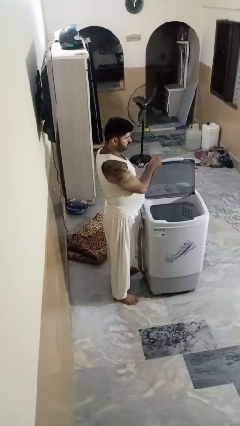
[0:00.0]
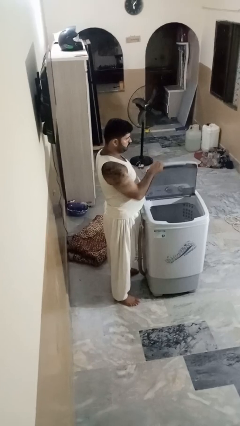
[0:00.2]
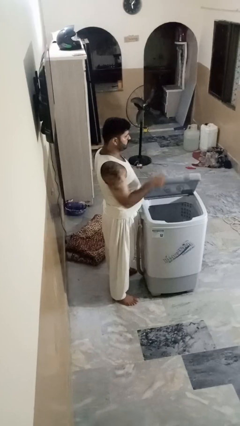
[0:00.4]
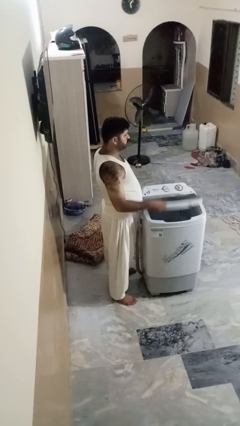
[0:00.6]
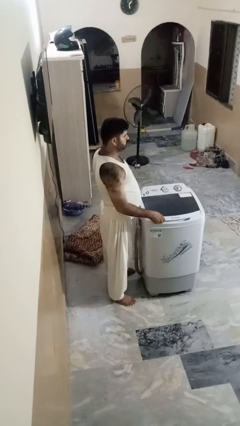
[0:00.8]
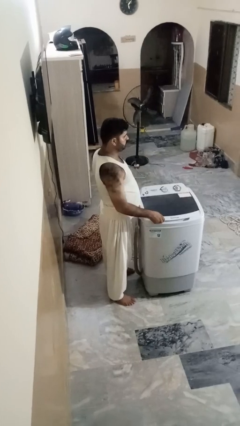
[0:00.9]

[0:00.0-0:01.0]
person closes clothes washer

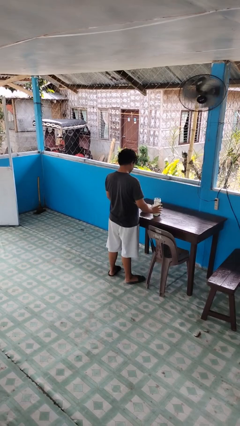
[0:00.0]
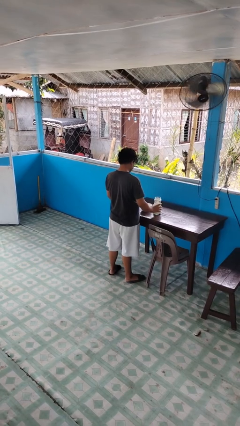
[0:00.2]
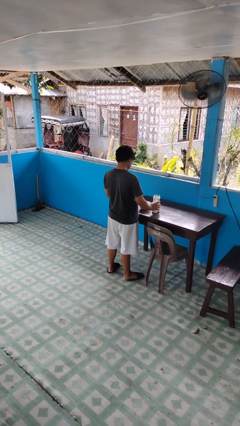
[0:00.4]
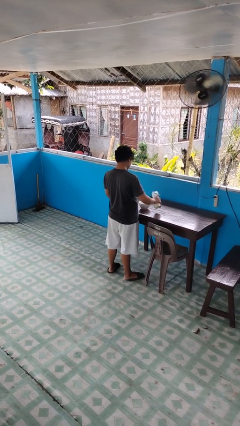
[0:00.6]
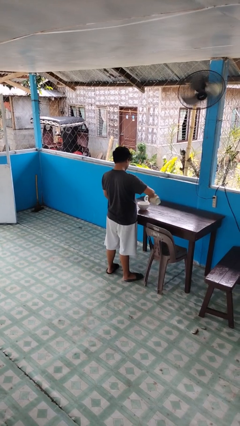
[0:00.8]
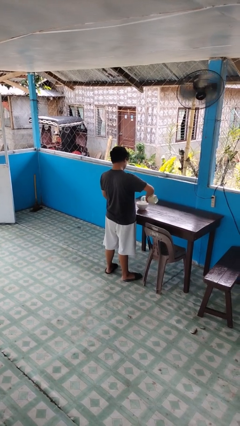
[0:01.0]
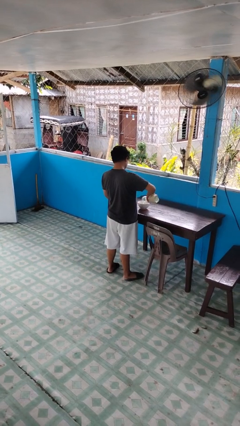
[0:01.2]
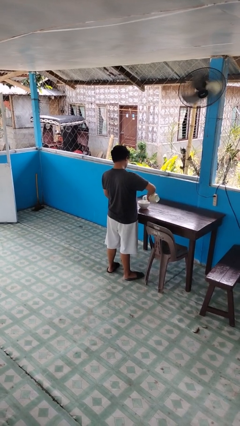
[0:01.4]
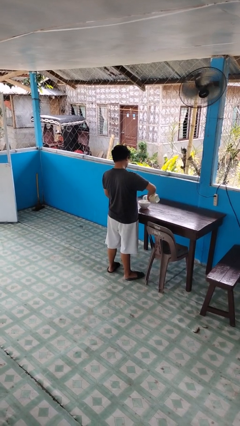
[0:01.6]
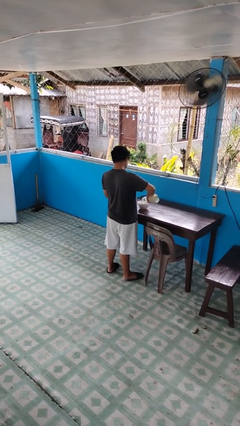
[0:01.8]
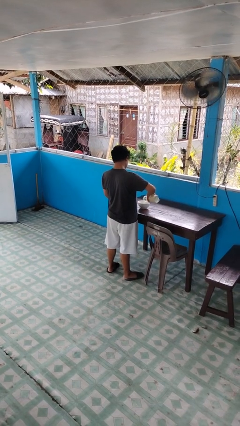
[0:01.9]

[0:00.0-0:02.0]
person pours into bowl

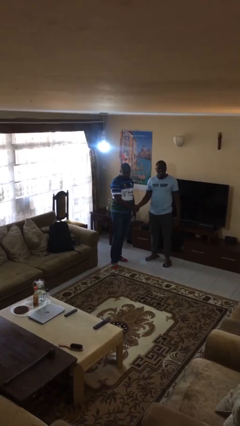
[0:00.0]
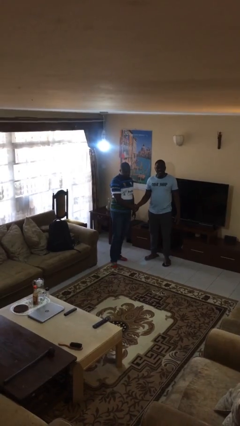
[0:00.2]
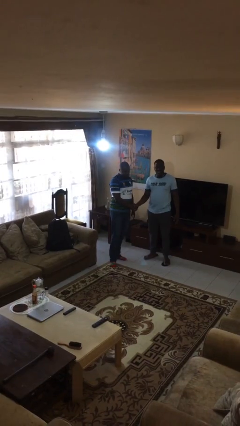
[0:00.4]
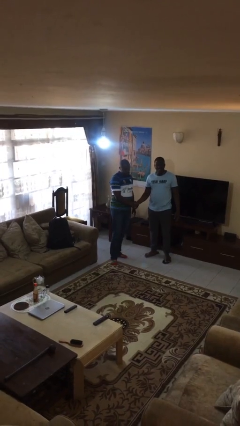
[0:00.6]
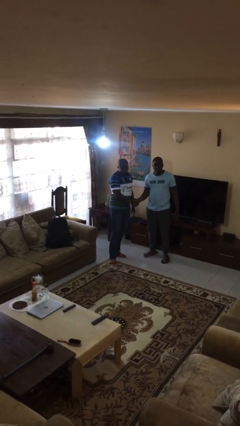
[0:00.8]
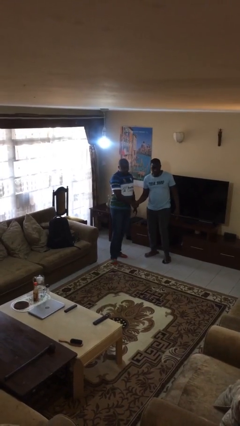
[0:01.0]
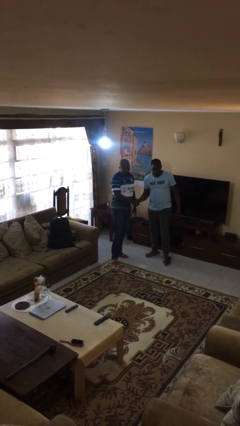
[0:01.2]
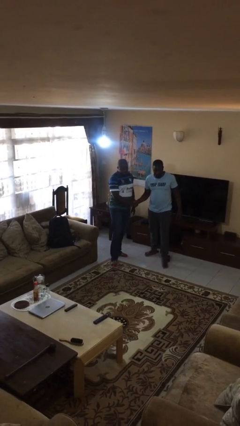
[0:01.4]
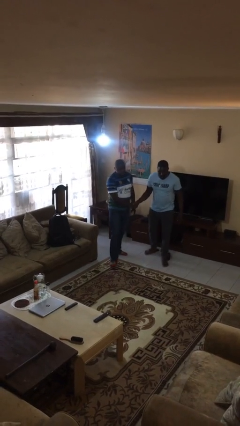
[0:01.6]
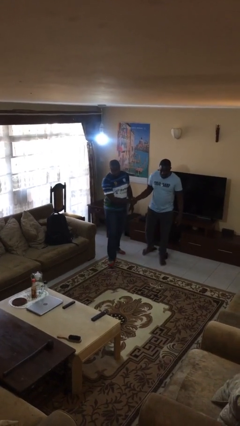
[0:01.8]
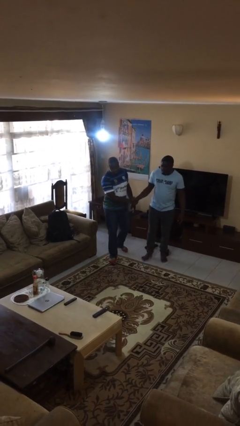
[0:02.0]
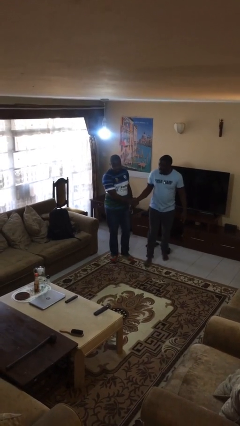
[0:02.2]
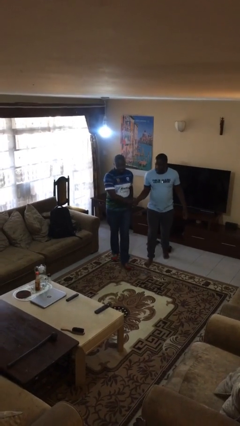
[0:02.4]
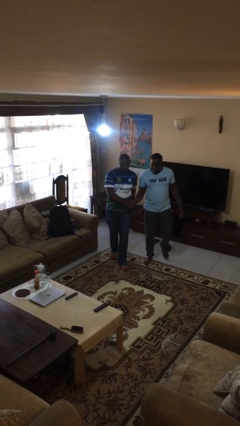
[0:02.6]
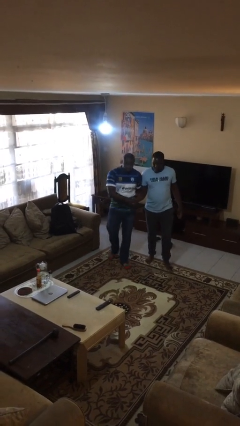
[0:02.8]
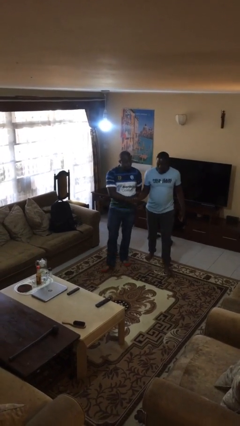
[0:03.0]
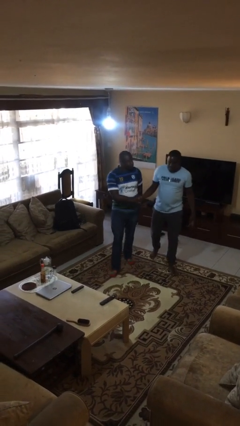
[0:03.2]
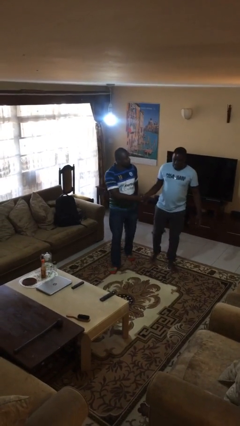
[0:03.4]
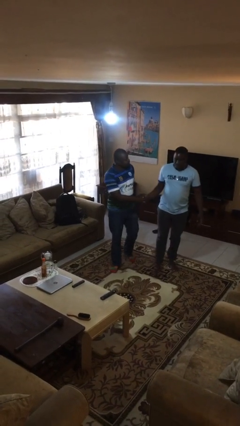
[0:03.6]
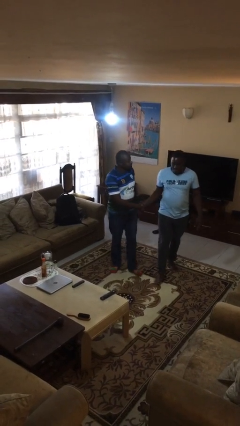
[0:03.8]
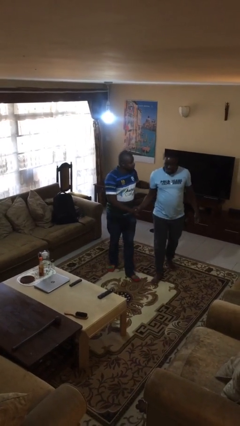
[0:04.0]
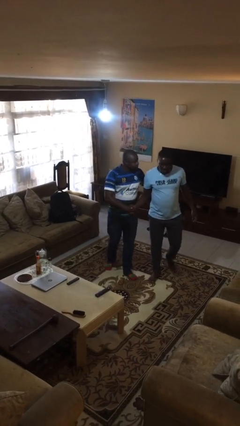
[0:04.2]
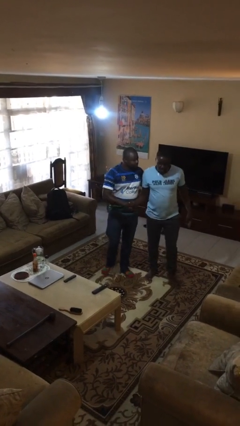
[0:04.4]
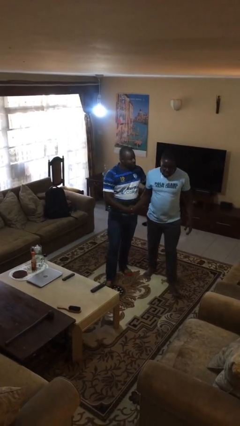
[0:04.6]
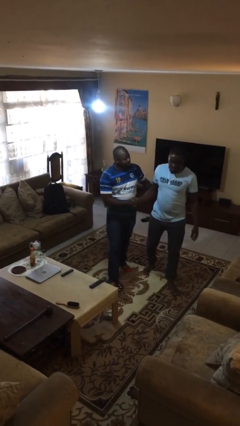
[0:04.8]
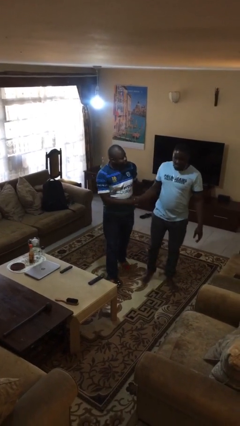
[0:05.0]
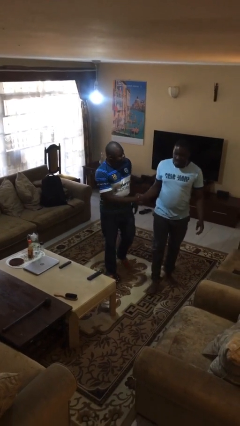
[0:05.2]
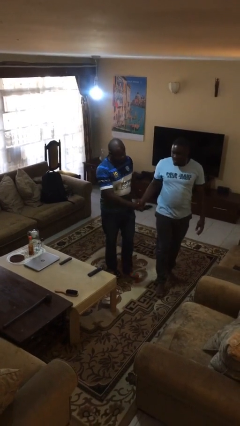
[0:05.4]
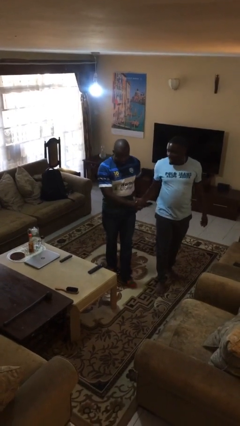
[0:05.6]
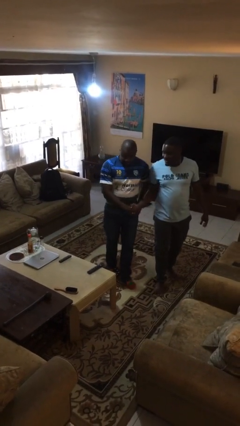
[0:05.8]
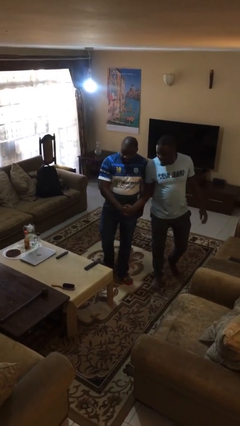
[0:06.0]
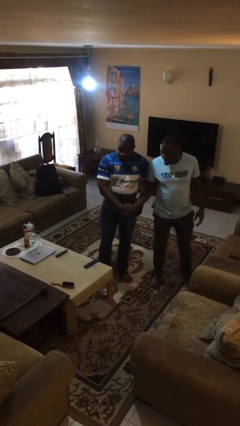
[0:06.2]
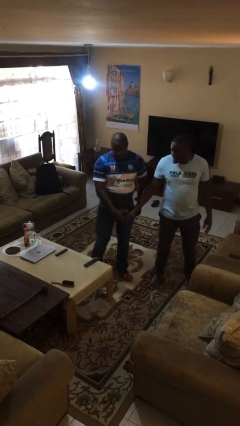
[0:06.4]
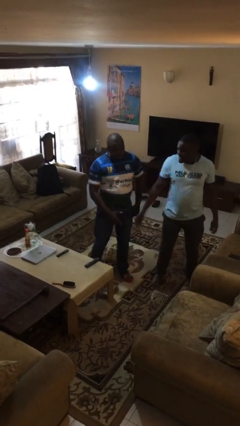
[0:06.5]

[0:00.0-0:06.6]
person holds hand

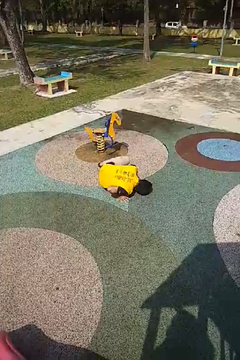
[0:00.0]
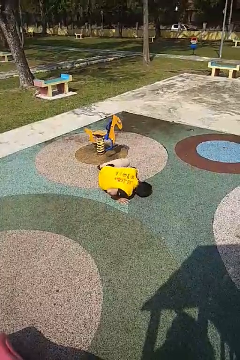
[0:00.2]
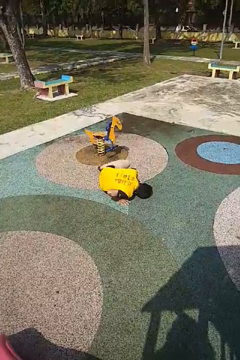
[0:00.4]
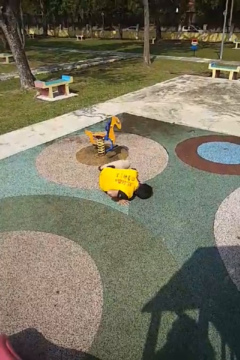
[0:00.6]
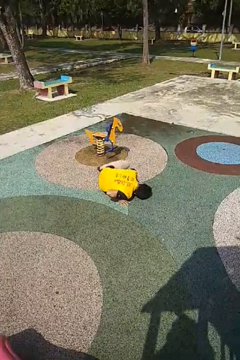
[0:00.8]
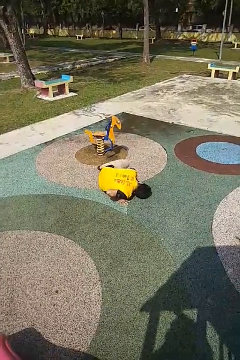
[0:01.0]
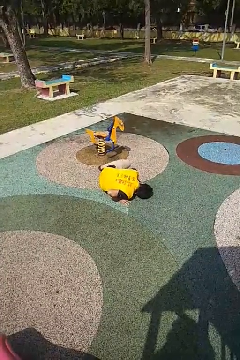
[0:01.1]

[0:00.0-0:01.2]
person lies down on floor

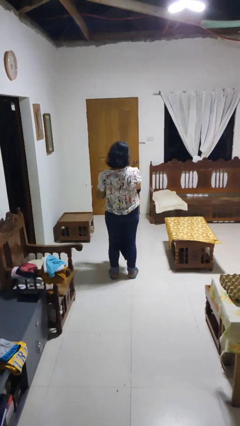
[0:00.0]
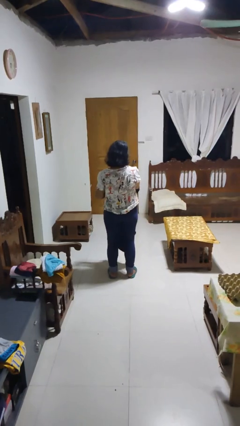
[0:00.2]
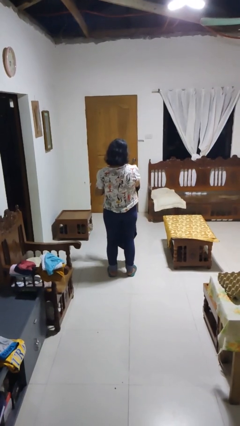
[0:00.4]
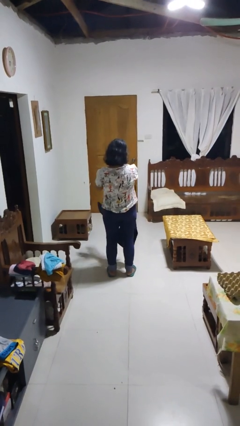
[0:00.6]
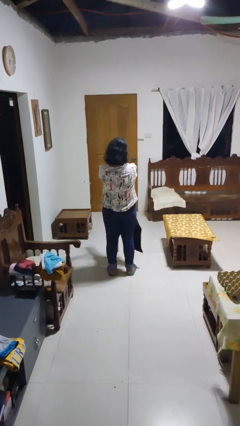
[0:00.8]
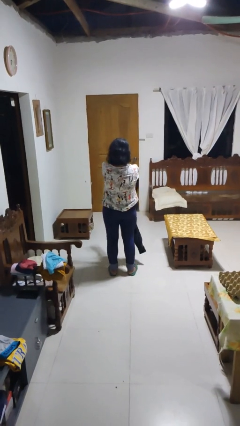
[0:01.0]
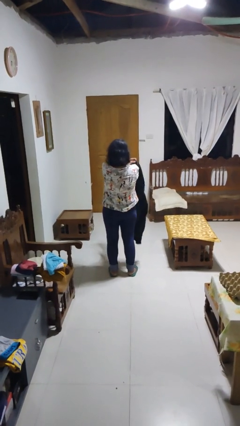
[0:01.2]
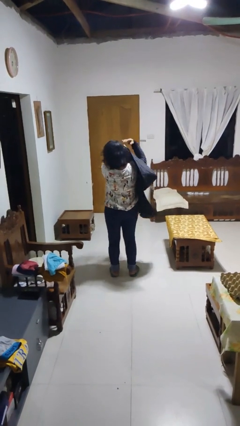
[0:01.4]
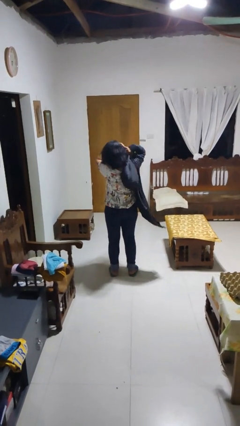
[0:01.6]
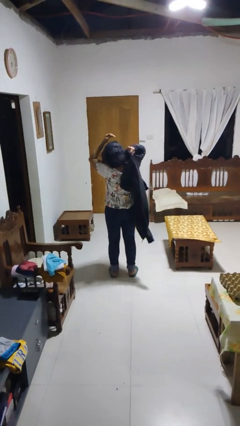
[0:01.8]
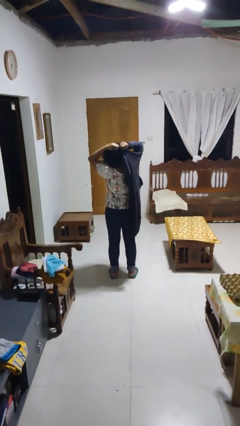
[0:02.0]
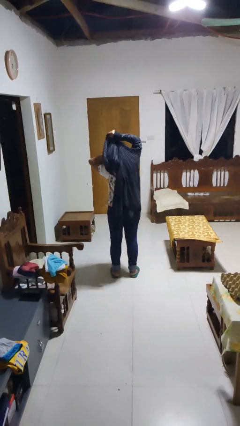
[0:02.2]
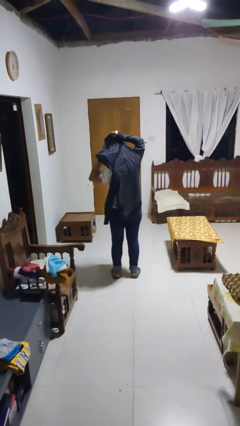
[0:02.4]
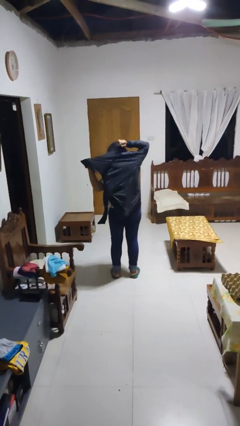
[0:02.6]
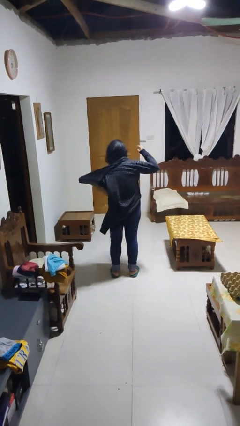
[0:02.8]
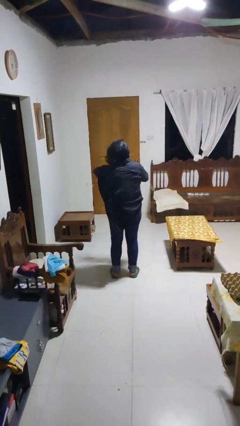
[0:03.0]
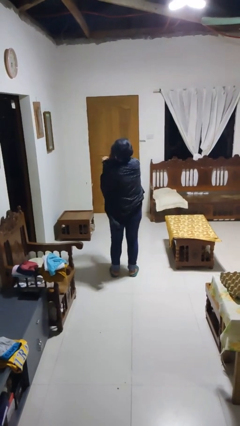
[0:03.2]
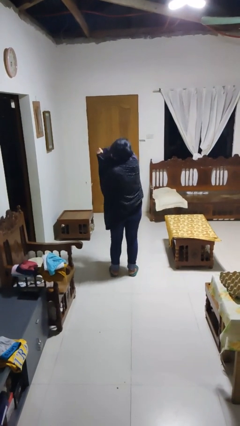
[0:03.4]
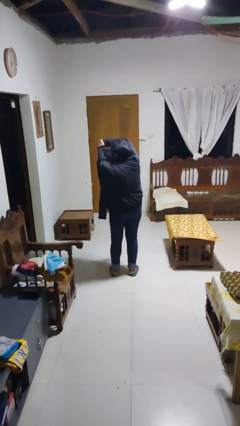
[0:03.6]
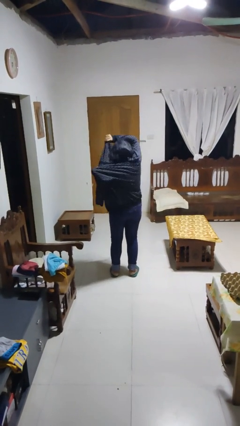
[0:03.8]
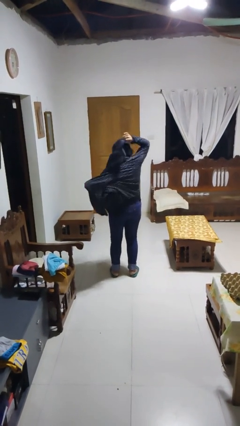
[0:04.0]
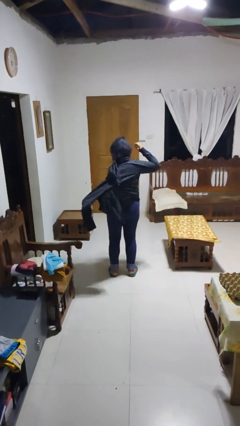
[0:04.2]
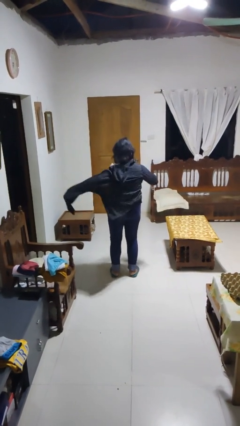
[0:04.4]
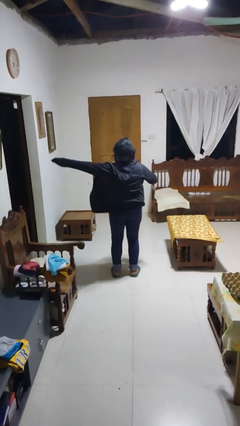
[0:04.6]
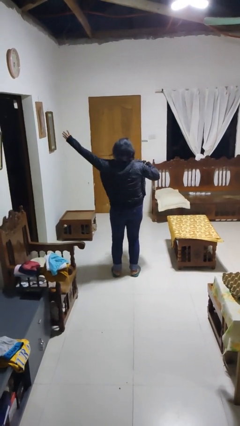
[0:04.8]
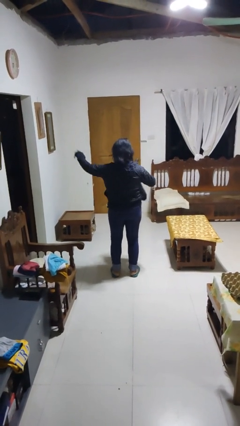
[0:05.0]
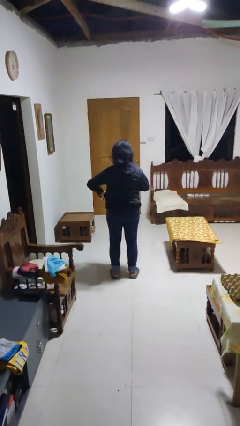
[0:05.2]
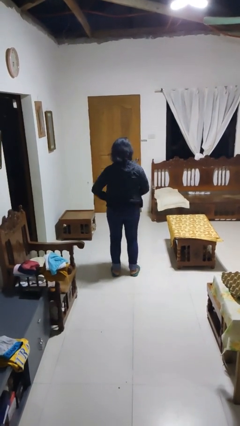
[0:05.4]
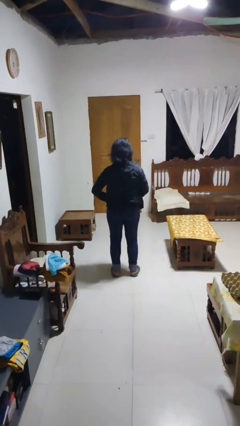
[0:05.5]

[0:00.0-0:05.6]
person puts on jacket

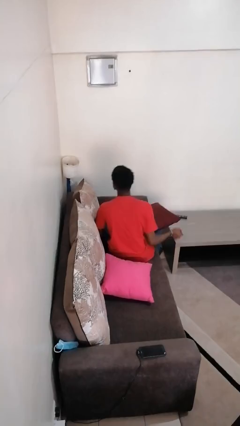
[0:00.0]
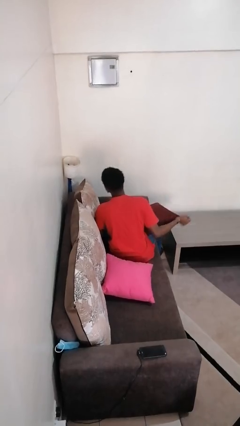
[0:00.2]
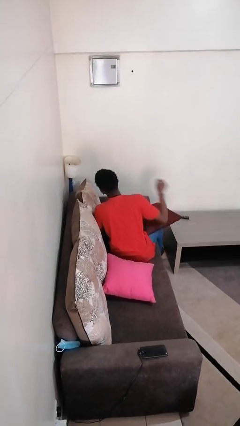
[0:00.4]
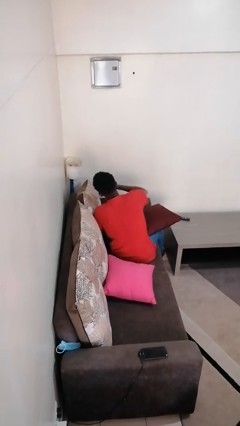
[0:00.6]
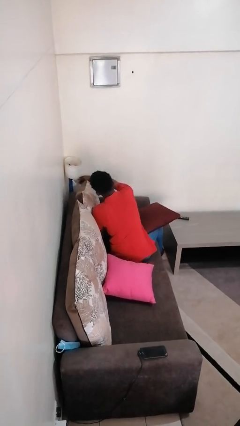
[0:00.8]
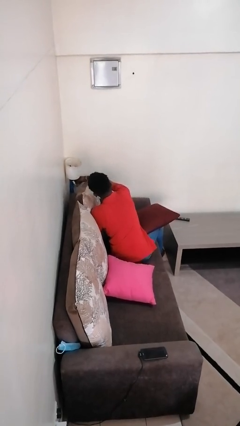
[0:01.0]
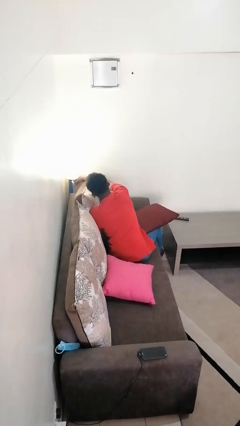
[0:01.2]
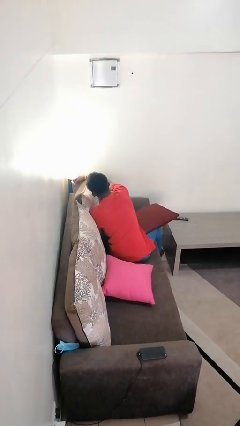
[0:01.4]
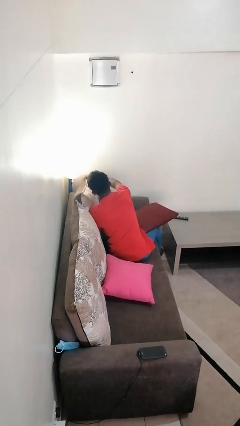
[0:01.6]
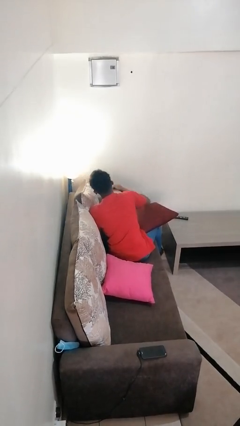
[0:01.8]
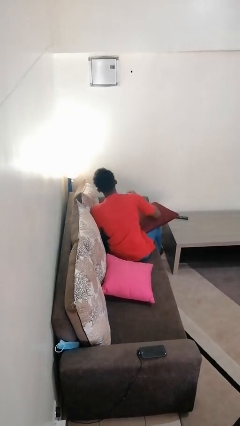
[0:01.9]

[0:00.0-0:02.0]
person turns on lamp
